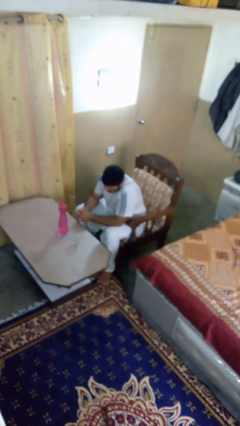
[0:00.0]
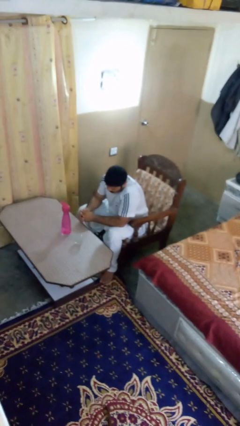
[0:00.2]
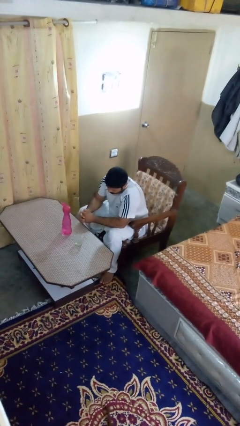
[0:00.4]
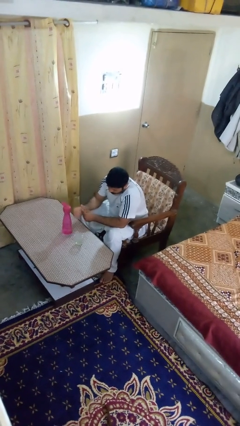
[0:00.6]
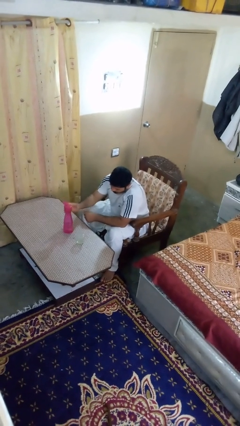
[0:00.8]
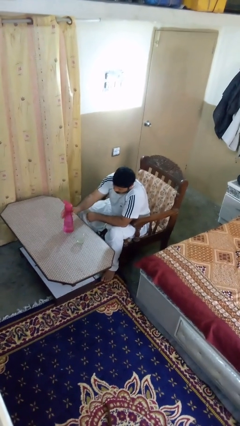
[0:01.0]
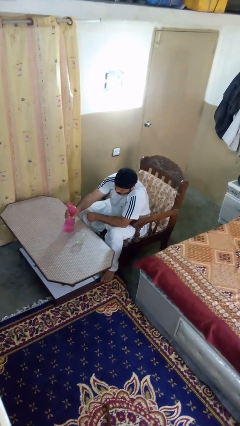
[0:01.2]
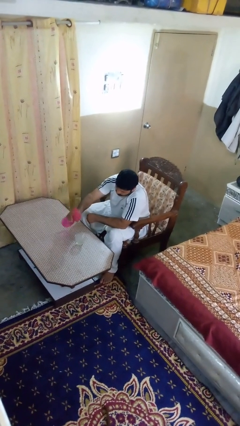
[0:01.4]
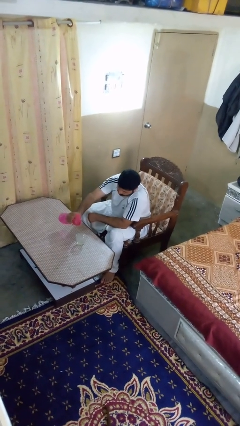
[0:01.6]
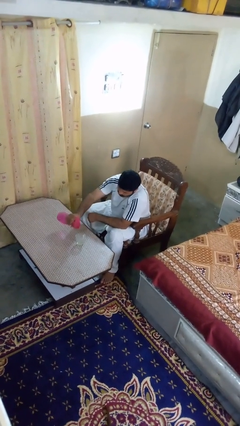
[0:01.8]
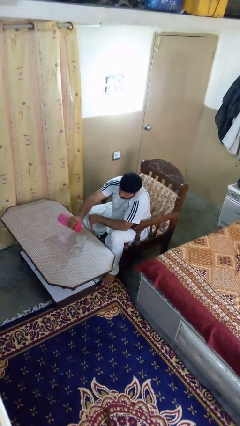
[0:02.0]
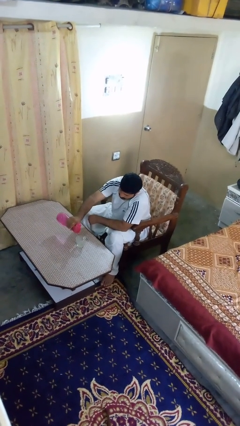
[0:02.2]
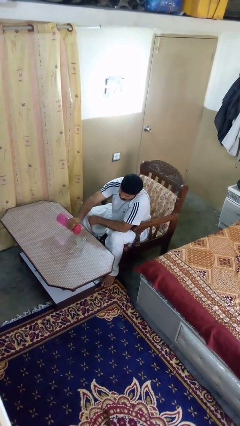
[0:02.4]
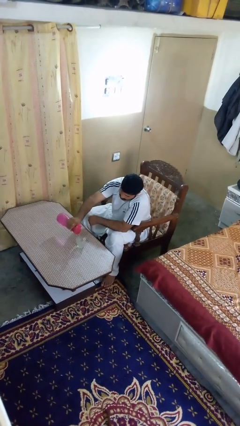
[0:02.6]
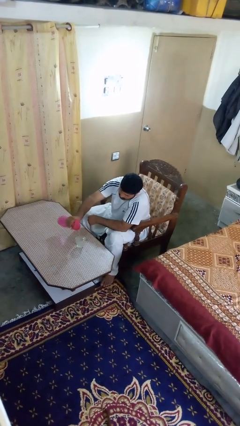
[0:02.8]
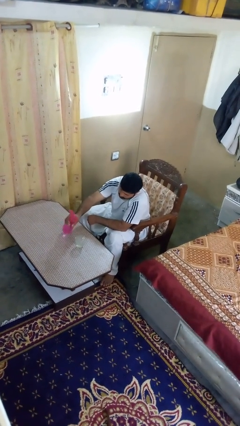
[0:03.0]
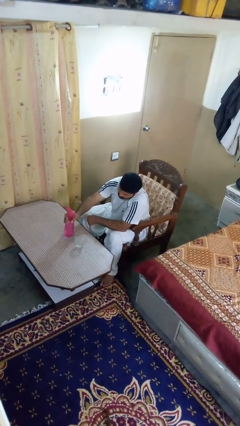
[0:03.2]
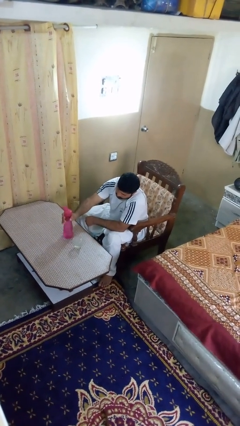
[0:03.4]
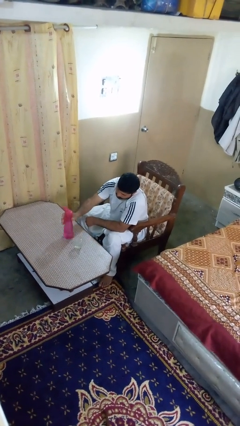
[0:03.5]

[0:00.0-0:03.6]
person pours liquid into cup

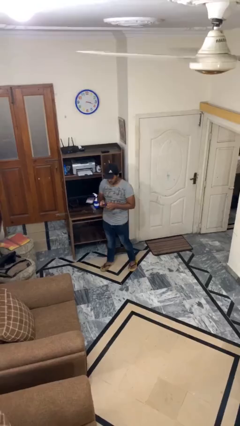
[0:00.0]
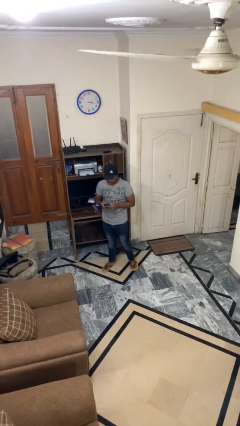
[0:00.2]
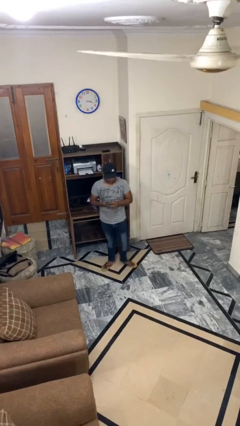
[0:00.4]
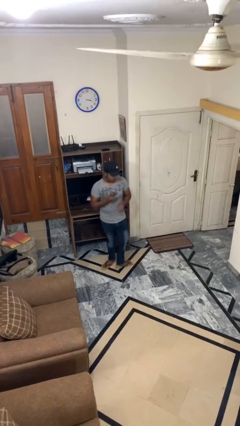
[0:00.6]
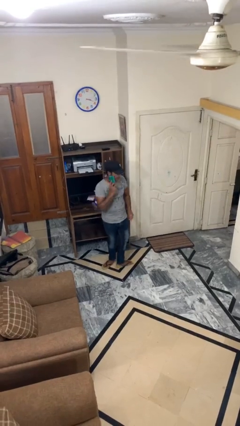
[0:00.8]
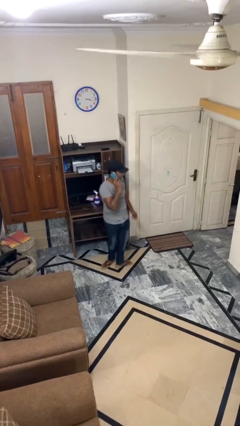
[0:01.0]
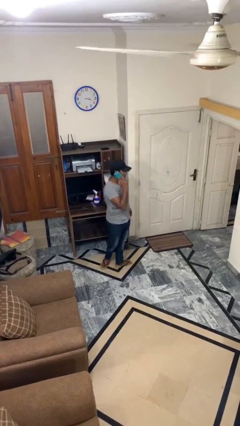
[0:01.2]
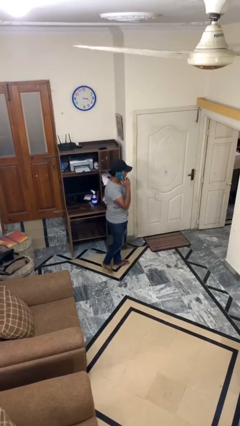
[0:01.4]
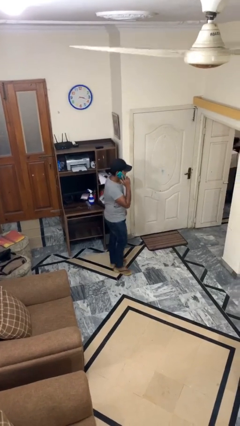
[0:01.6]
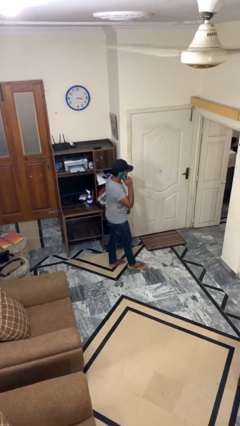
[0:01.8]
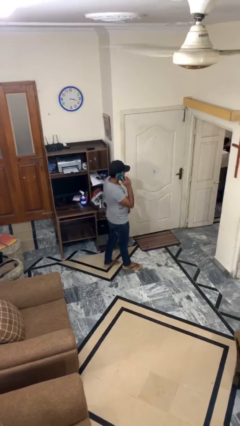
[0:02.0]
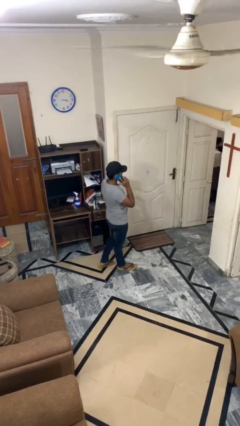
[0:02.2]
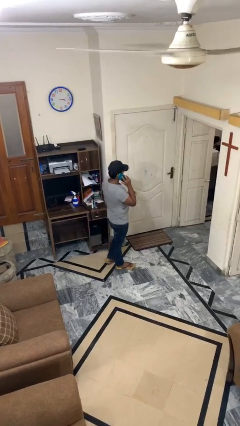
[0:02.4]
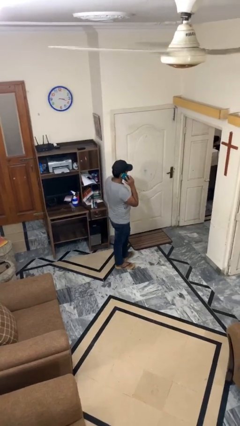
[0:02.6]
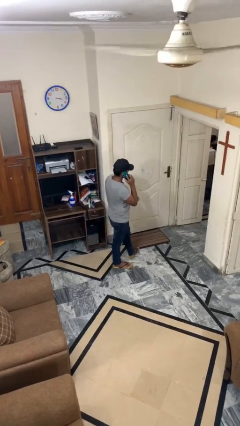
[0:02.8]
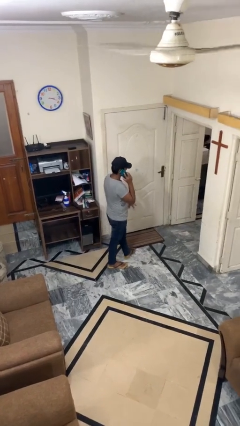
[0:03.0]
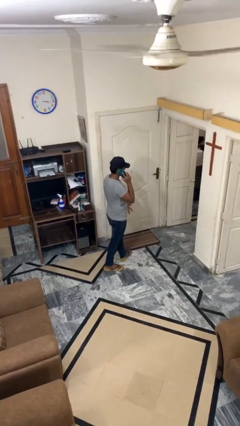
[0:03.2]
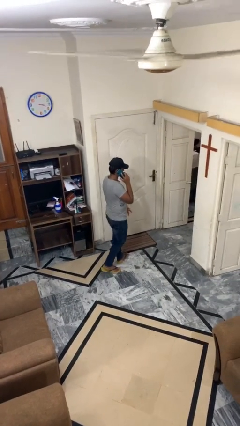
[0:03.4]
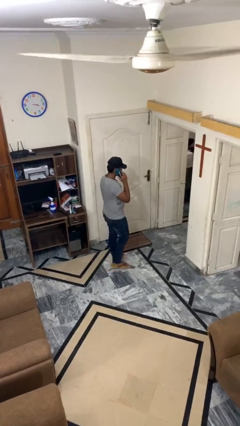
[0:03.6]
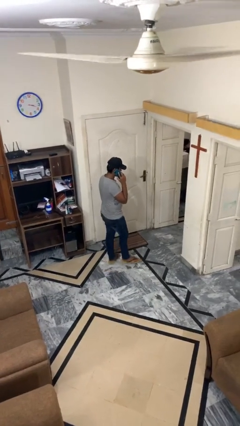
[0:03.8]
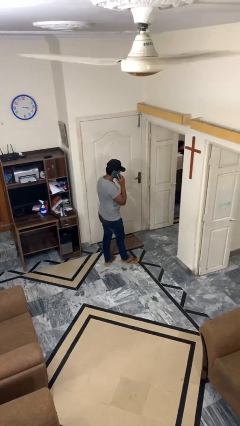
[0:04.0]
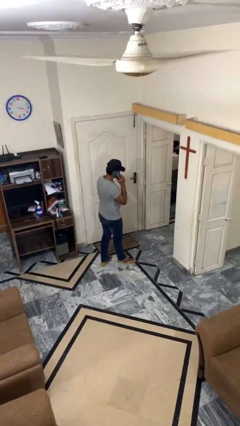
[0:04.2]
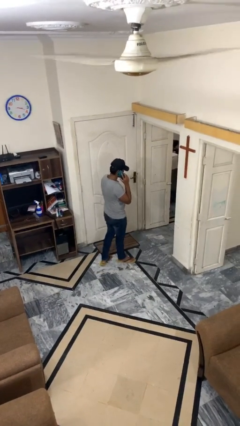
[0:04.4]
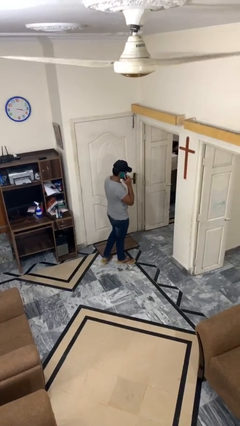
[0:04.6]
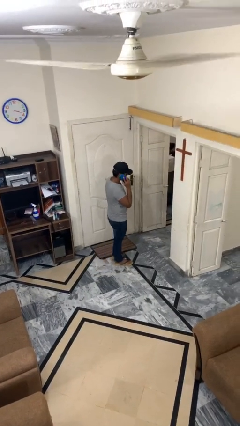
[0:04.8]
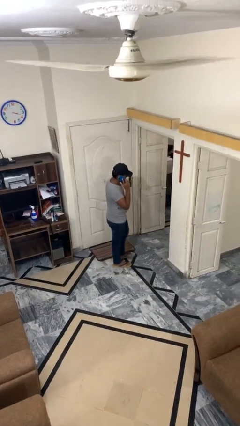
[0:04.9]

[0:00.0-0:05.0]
person talks on phone

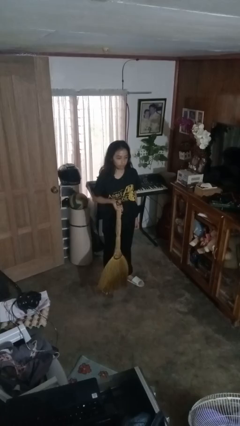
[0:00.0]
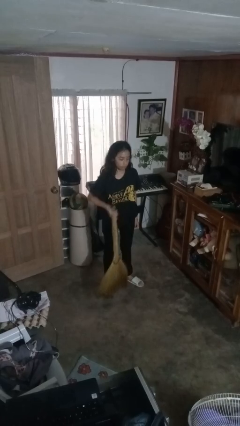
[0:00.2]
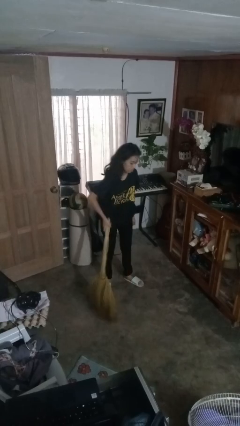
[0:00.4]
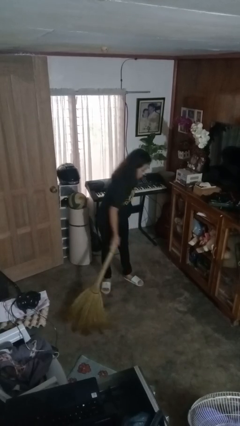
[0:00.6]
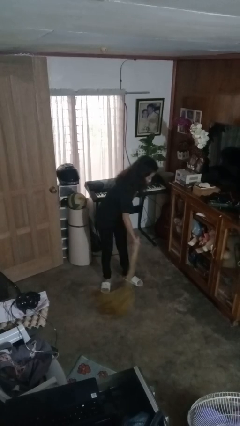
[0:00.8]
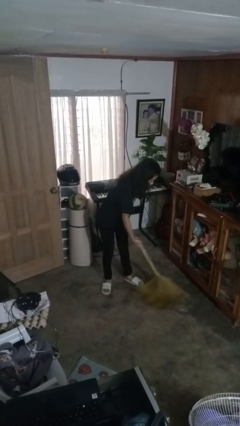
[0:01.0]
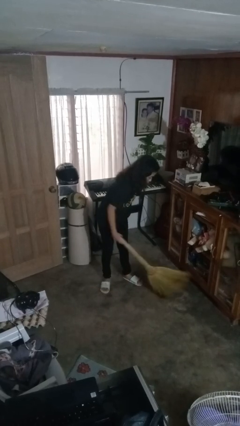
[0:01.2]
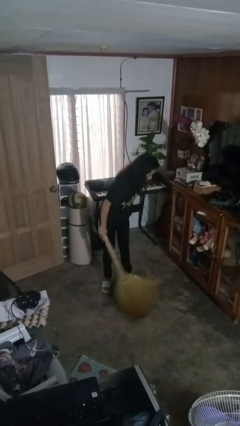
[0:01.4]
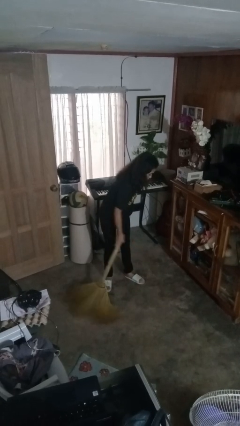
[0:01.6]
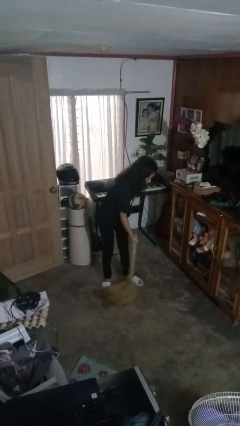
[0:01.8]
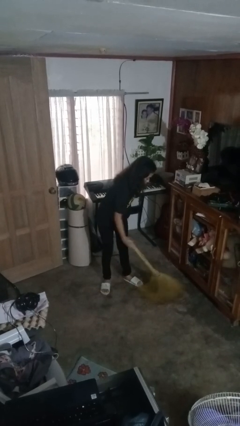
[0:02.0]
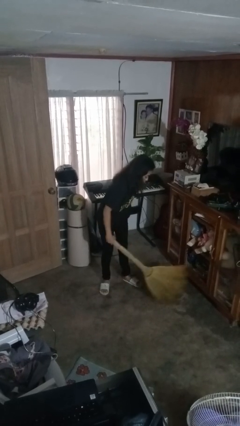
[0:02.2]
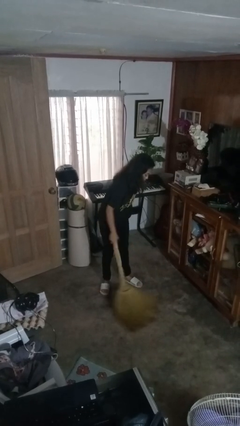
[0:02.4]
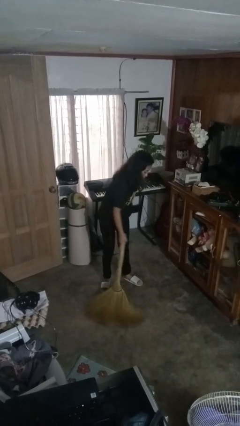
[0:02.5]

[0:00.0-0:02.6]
person sweeps floor

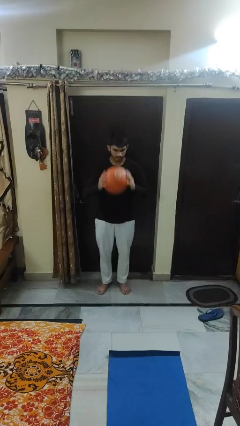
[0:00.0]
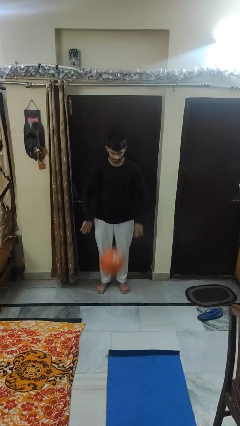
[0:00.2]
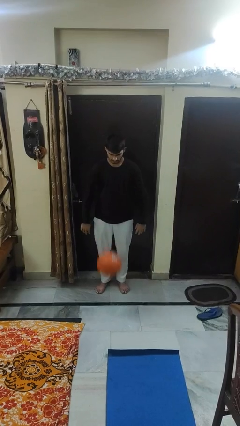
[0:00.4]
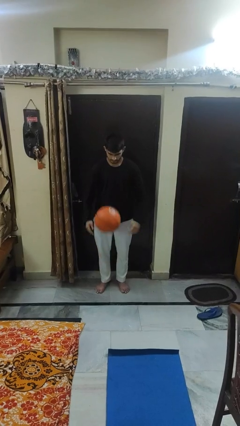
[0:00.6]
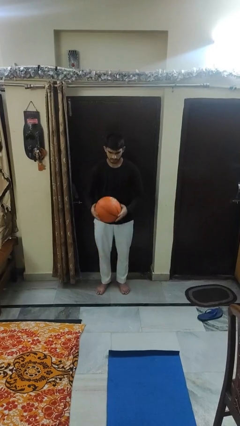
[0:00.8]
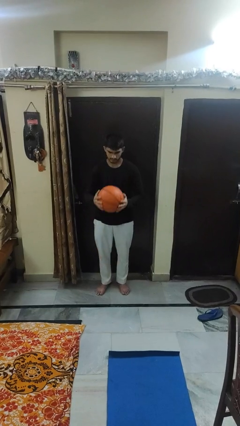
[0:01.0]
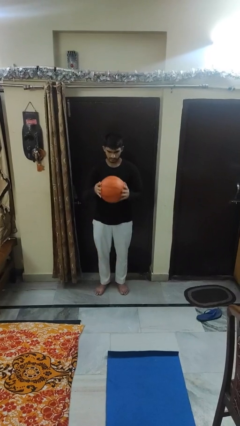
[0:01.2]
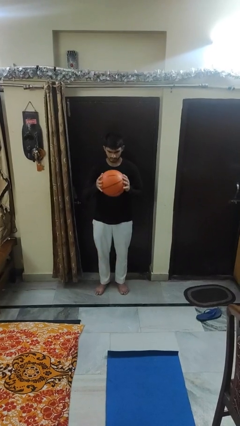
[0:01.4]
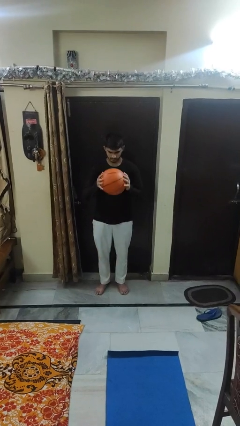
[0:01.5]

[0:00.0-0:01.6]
person bounces ball on floor

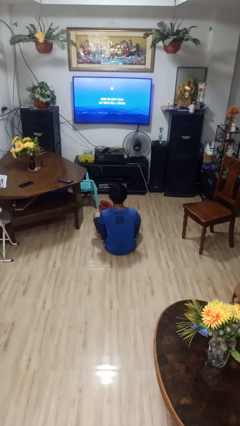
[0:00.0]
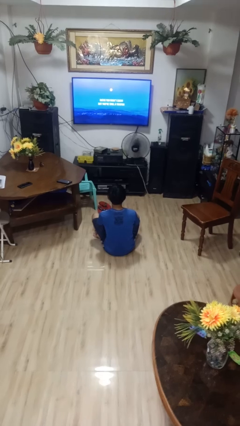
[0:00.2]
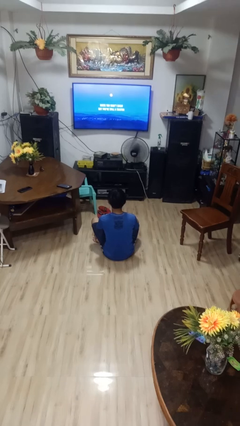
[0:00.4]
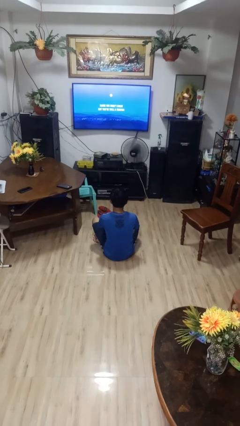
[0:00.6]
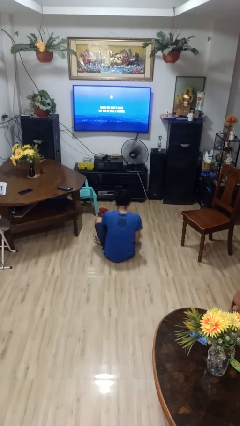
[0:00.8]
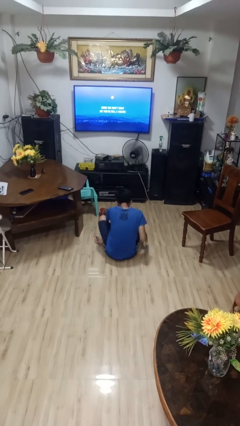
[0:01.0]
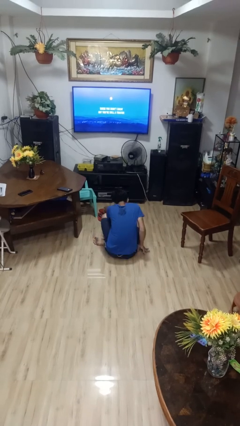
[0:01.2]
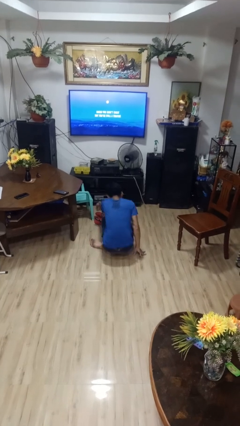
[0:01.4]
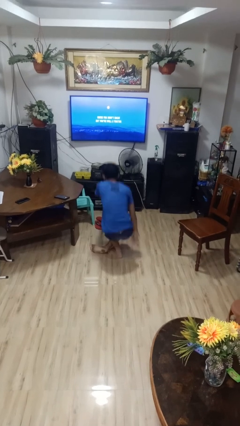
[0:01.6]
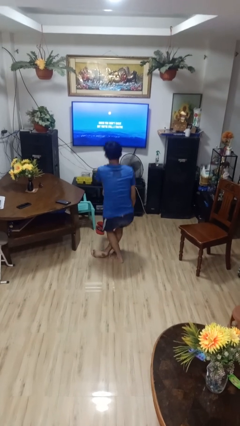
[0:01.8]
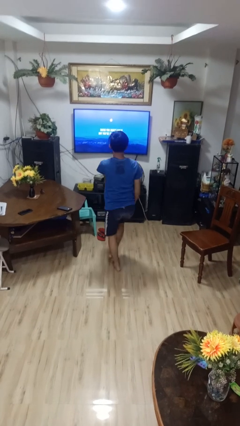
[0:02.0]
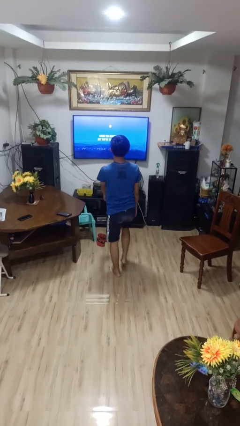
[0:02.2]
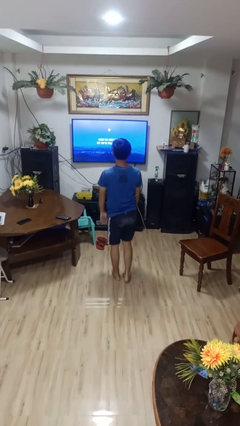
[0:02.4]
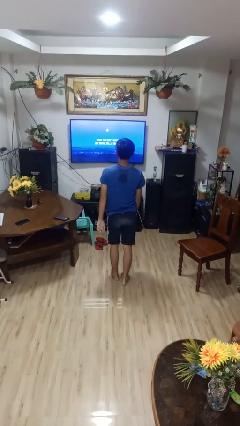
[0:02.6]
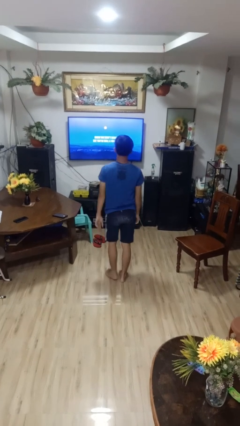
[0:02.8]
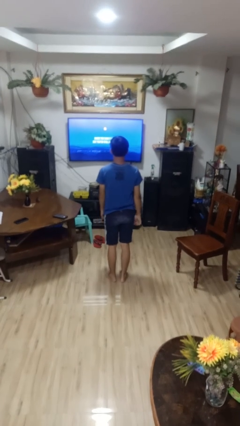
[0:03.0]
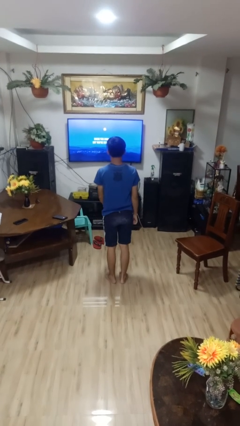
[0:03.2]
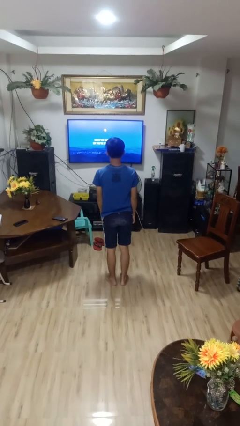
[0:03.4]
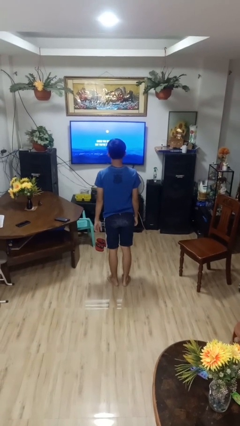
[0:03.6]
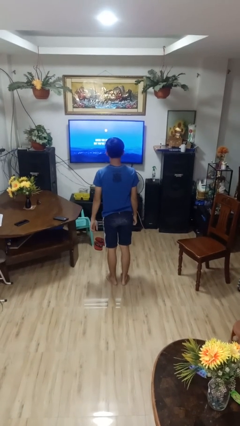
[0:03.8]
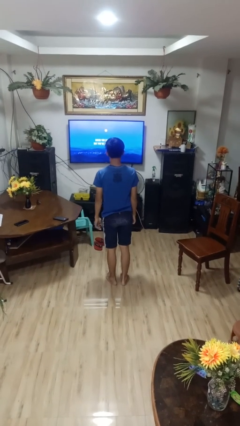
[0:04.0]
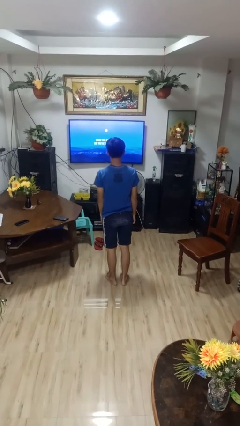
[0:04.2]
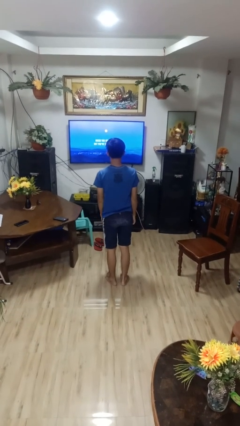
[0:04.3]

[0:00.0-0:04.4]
person stands up from floor

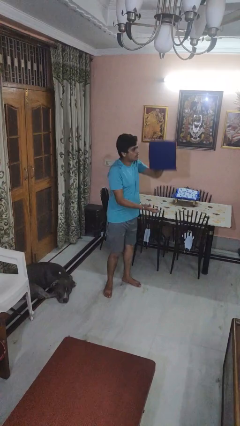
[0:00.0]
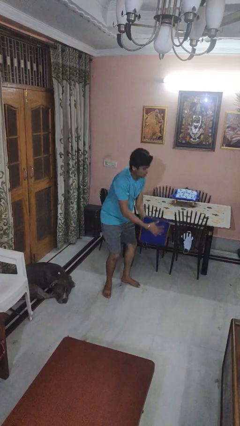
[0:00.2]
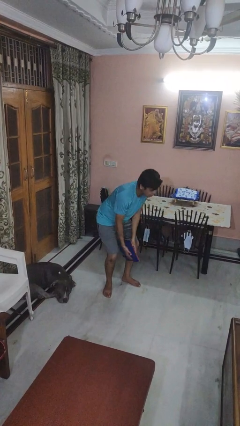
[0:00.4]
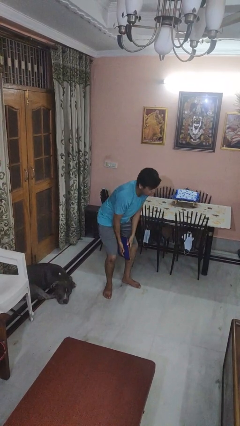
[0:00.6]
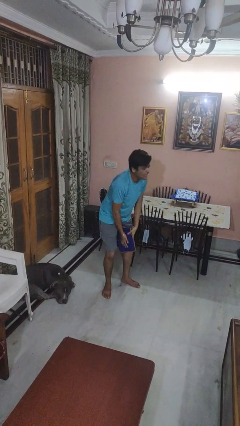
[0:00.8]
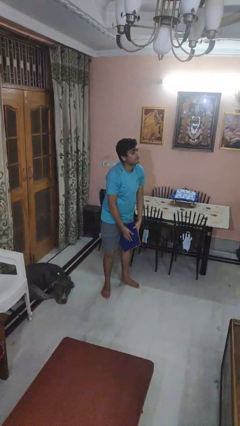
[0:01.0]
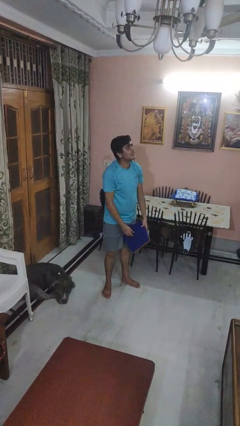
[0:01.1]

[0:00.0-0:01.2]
person catches dropped object
